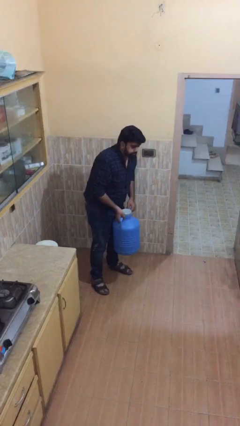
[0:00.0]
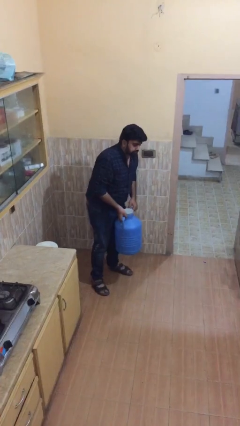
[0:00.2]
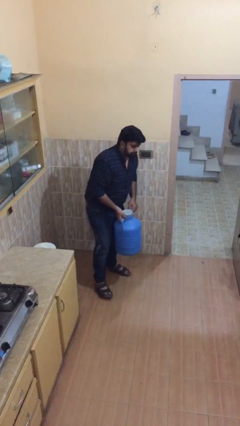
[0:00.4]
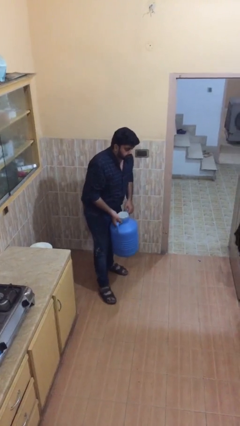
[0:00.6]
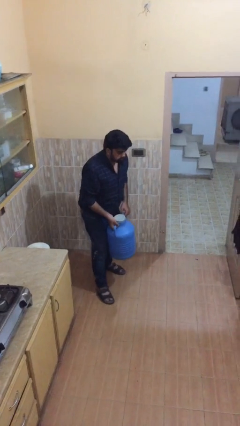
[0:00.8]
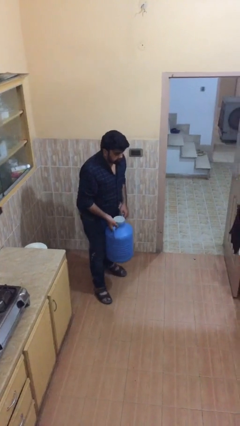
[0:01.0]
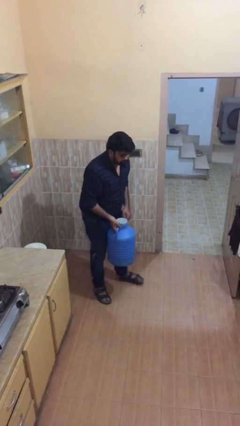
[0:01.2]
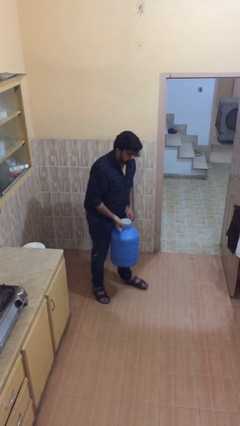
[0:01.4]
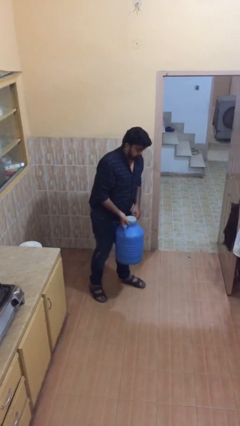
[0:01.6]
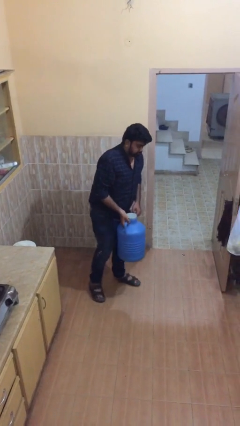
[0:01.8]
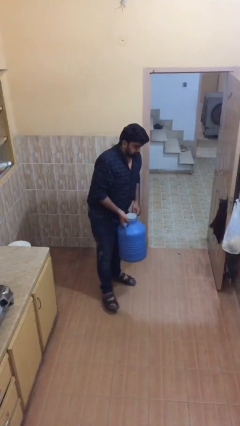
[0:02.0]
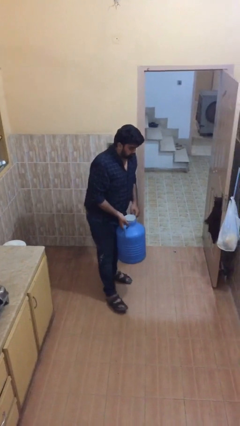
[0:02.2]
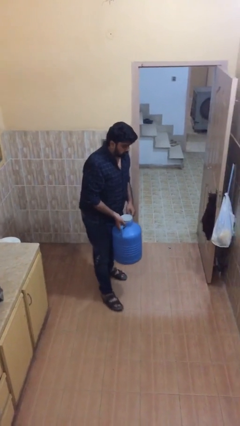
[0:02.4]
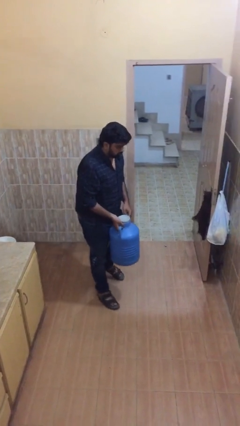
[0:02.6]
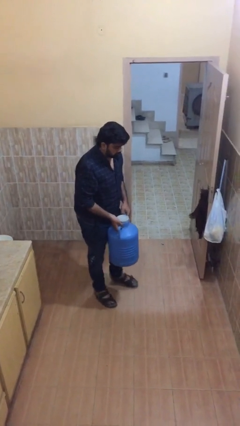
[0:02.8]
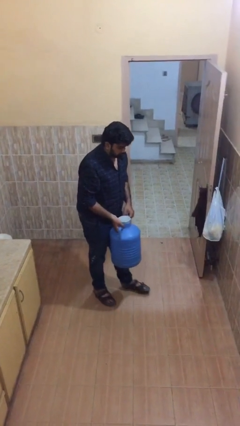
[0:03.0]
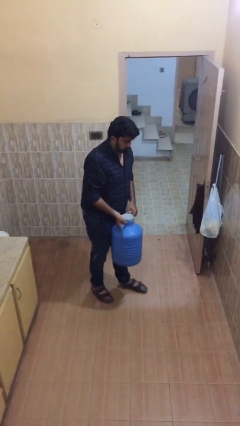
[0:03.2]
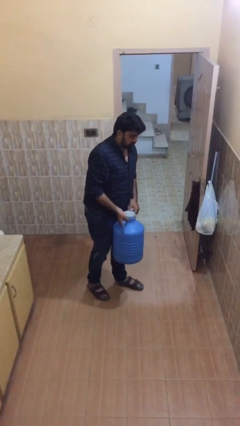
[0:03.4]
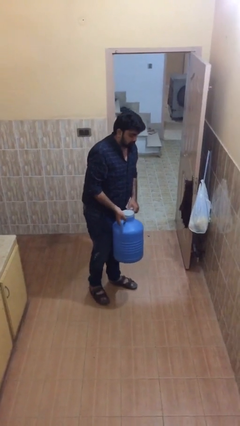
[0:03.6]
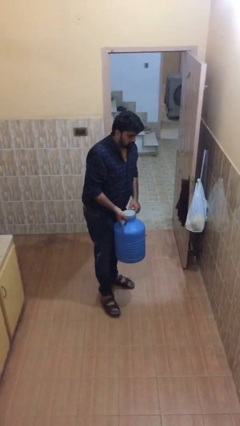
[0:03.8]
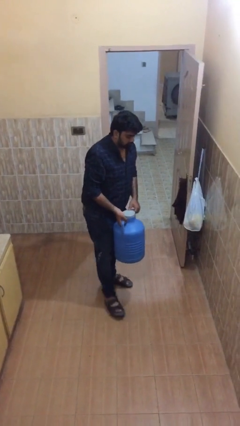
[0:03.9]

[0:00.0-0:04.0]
person carries heavy object

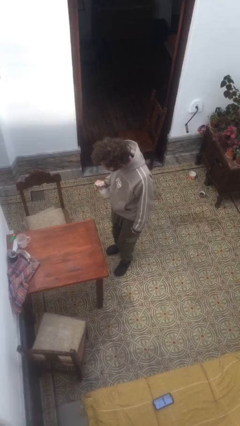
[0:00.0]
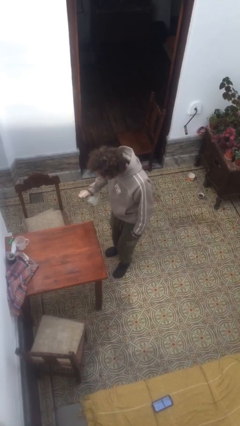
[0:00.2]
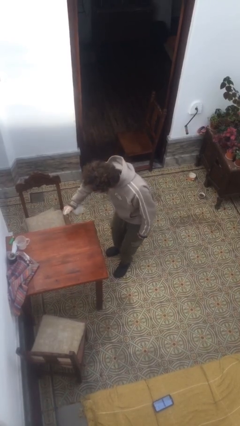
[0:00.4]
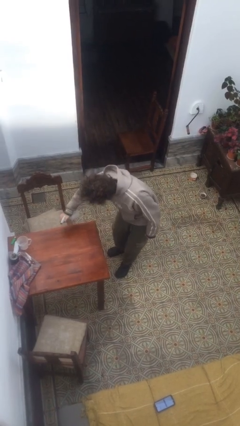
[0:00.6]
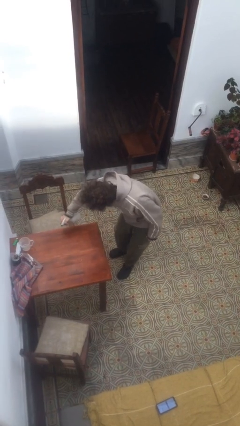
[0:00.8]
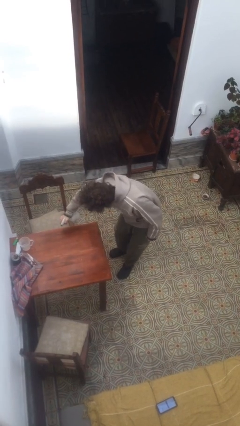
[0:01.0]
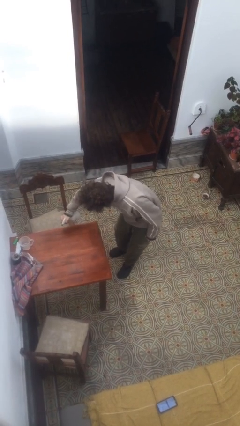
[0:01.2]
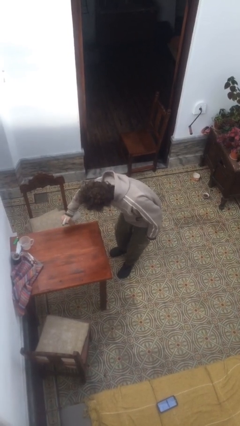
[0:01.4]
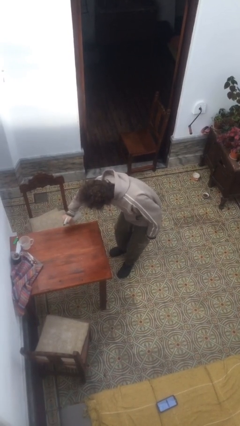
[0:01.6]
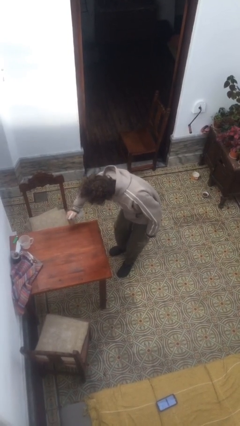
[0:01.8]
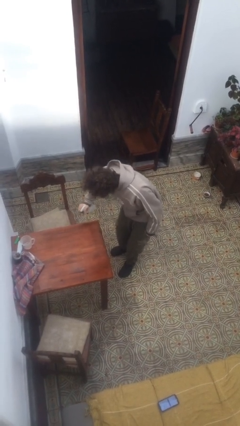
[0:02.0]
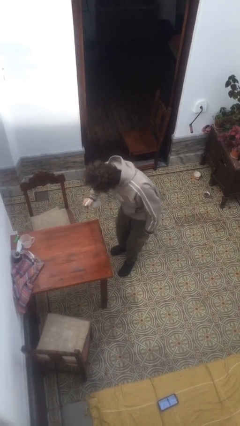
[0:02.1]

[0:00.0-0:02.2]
person sprays from bottle

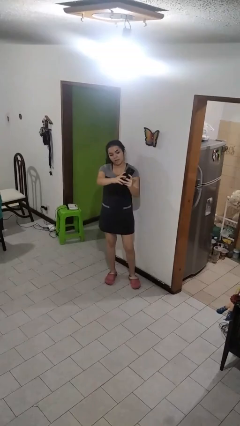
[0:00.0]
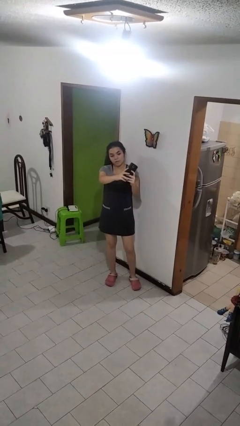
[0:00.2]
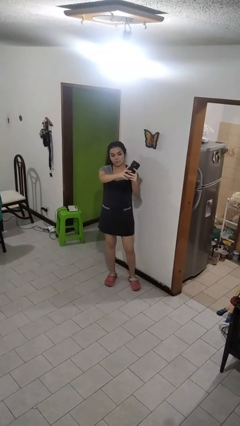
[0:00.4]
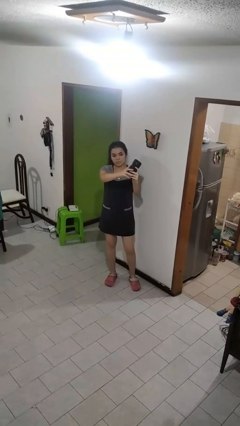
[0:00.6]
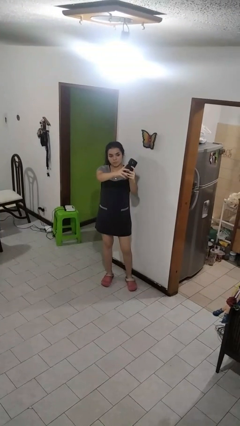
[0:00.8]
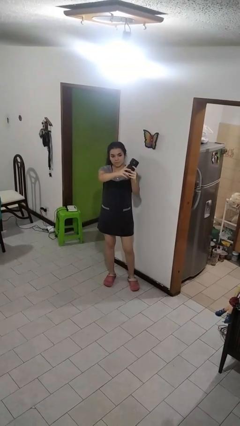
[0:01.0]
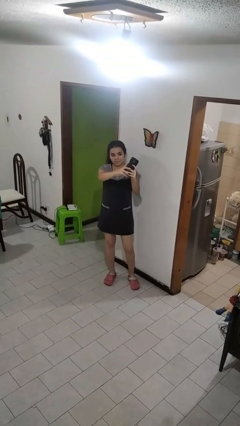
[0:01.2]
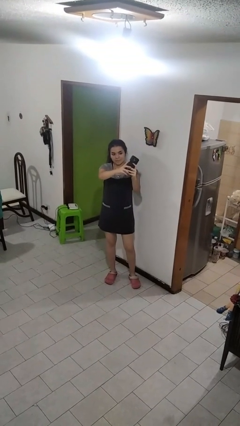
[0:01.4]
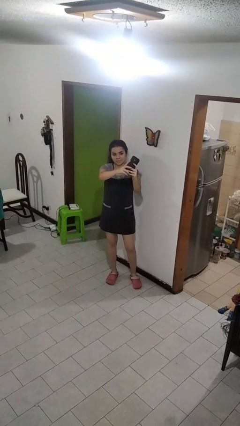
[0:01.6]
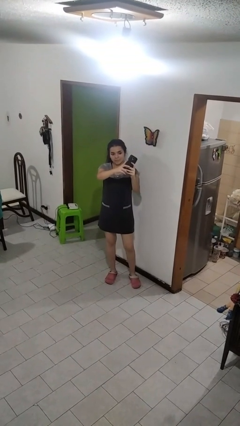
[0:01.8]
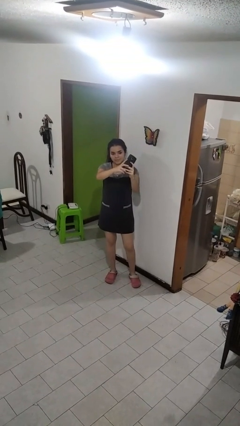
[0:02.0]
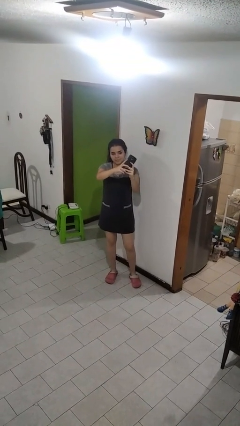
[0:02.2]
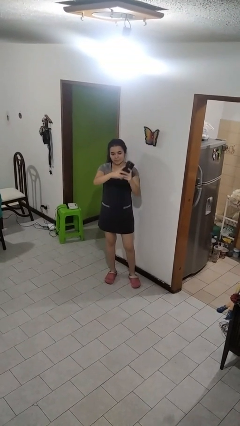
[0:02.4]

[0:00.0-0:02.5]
person takes selfie

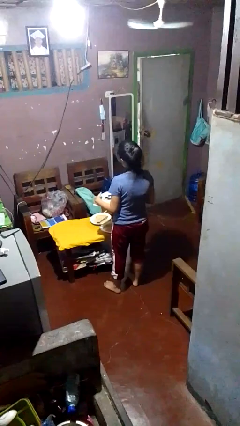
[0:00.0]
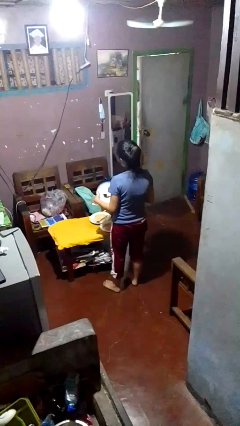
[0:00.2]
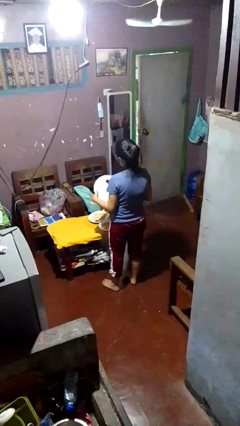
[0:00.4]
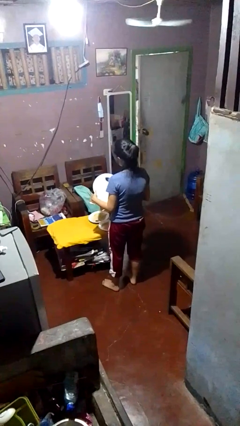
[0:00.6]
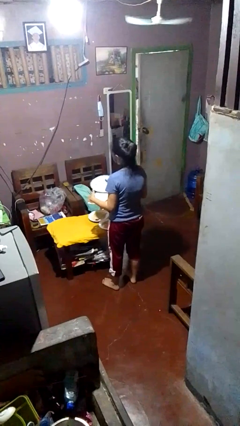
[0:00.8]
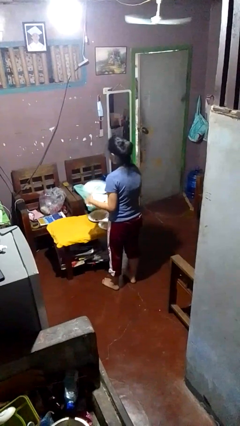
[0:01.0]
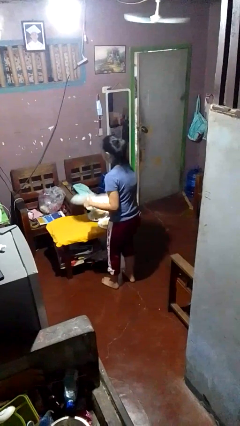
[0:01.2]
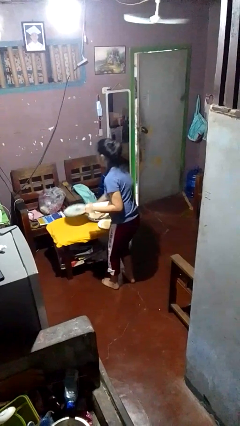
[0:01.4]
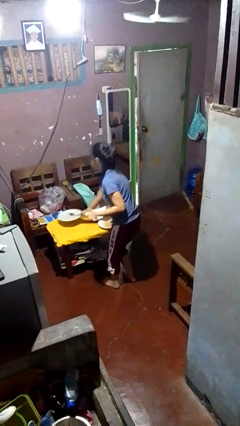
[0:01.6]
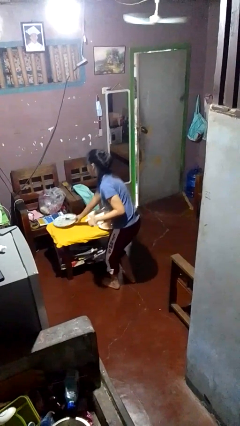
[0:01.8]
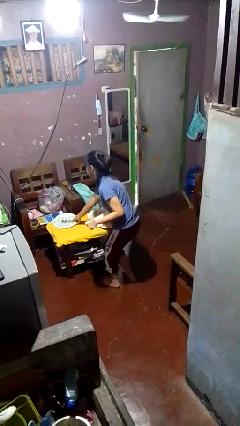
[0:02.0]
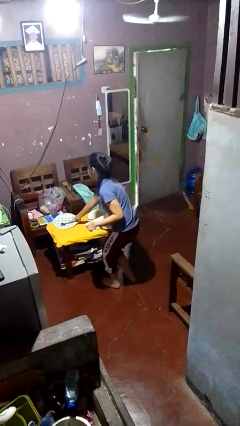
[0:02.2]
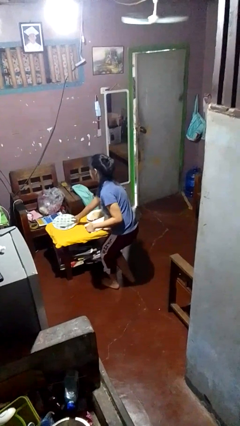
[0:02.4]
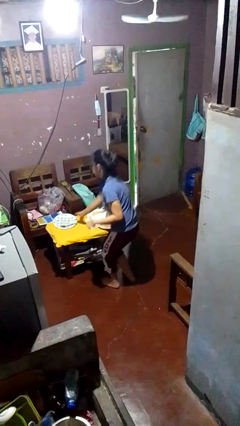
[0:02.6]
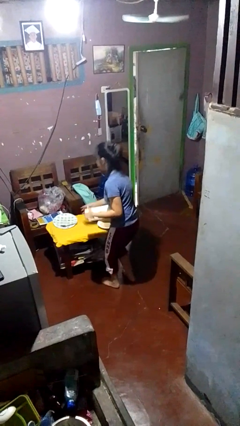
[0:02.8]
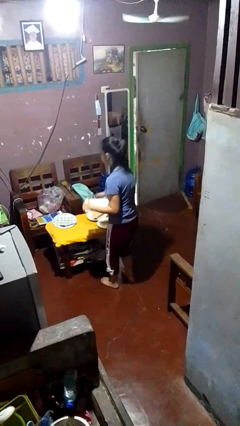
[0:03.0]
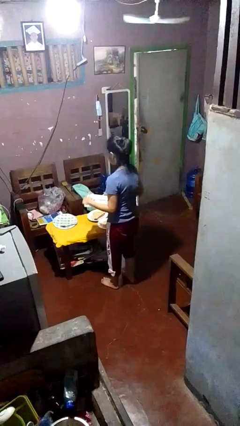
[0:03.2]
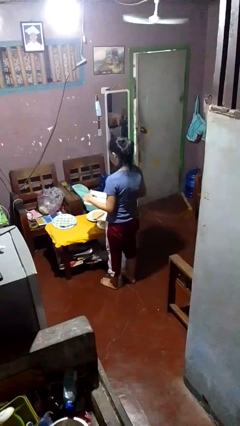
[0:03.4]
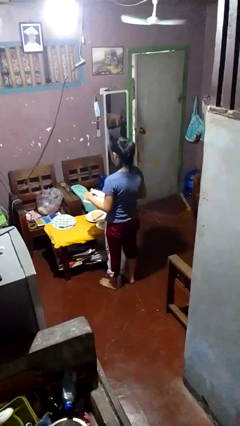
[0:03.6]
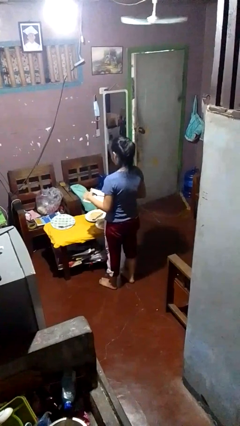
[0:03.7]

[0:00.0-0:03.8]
person sets table

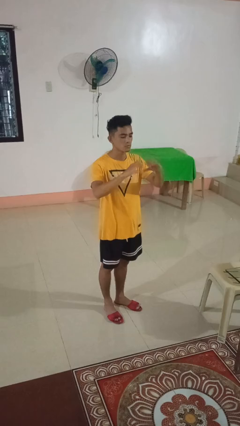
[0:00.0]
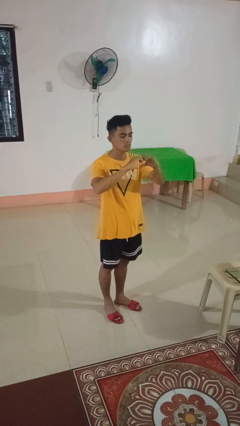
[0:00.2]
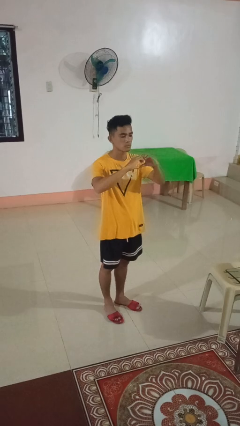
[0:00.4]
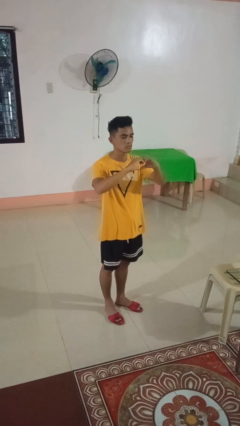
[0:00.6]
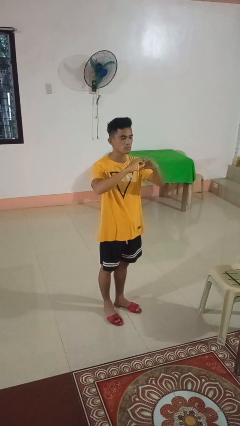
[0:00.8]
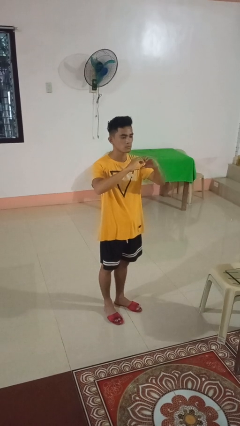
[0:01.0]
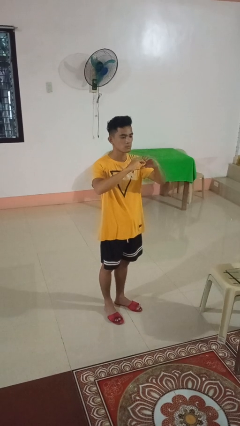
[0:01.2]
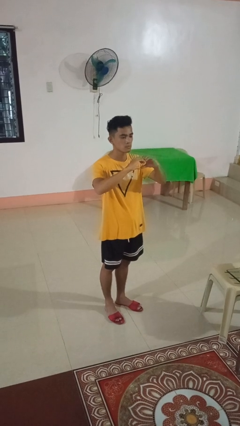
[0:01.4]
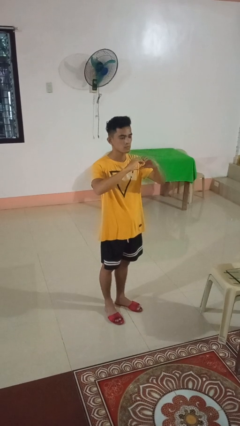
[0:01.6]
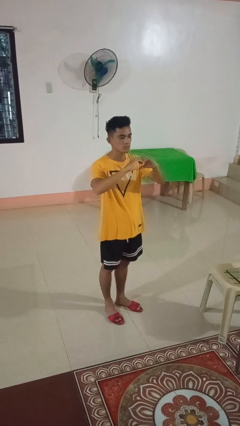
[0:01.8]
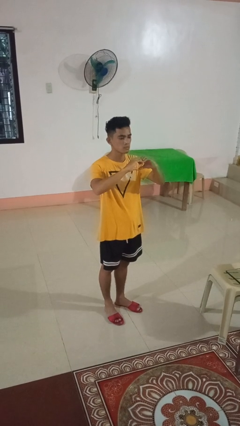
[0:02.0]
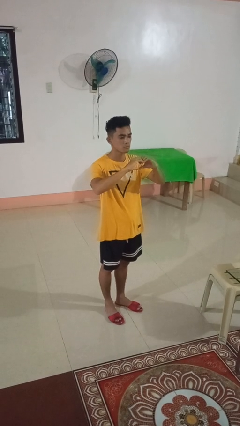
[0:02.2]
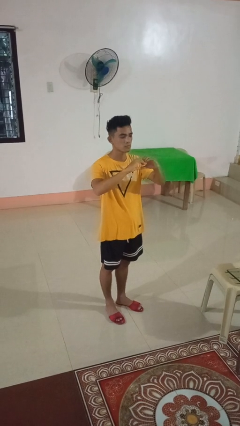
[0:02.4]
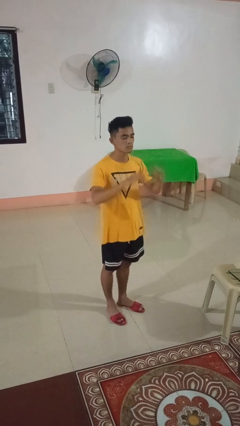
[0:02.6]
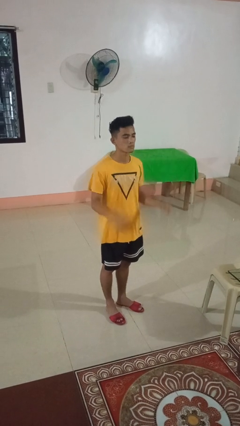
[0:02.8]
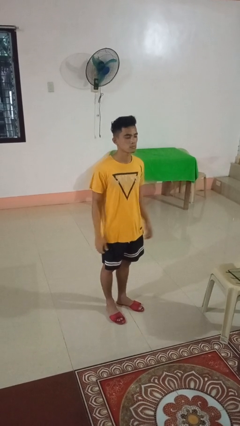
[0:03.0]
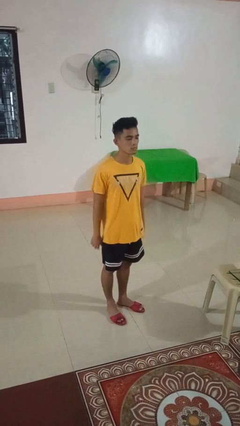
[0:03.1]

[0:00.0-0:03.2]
person gestures heart

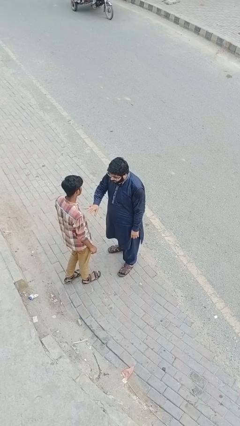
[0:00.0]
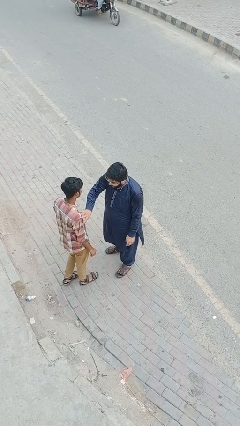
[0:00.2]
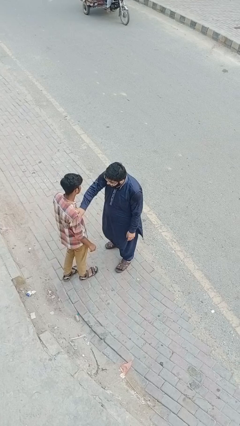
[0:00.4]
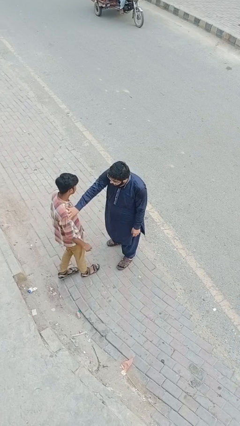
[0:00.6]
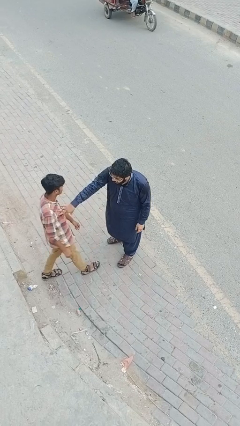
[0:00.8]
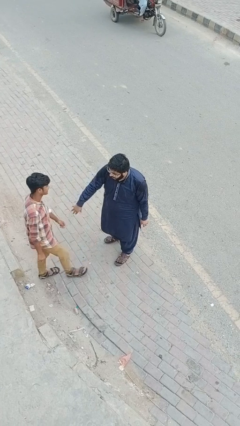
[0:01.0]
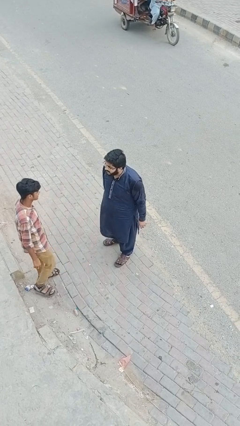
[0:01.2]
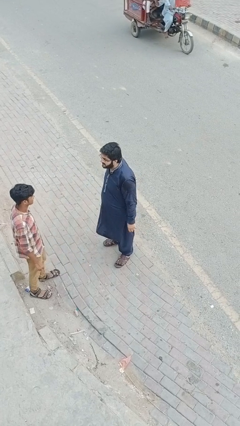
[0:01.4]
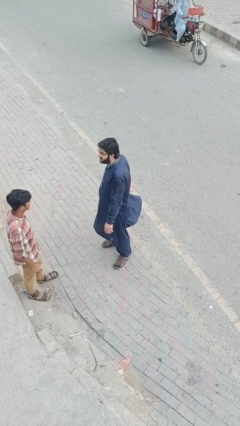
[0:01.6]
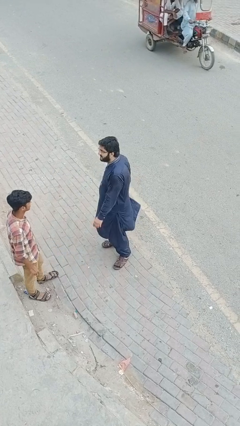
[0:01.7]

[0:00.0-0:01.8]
person shoves person
